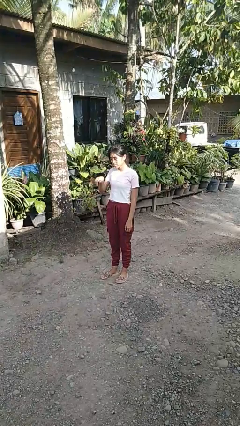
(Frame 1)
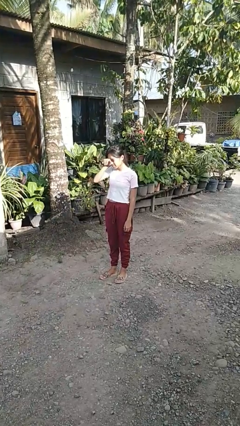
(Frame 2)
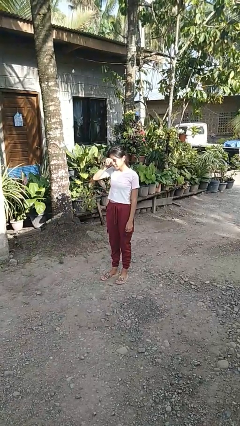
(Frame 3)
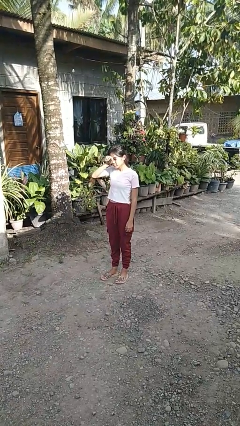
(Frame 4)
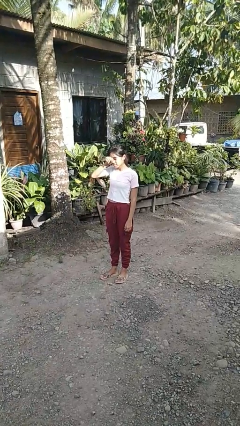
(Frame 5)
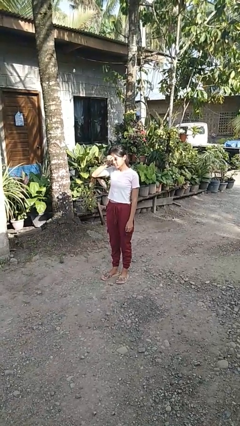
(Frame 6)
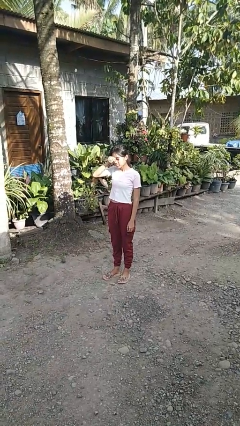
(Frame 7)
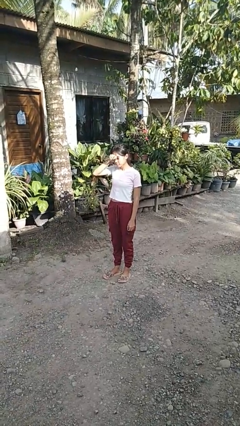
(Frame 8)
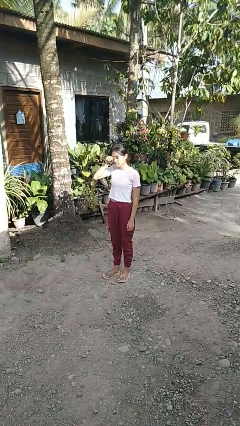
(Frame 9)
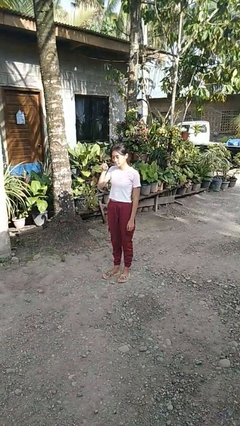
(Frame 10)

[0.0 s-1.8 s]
person rubs eyes

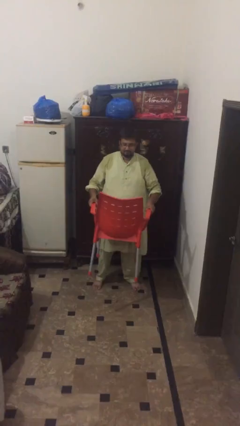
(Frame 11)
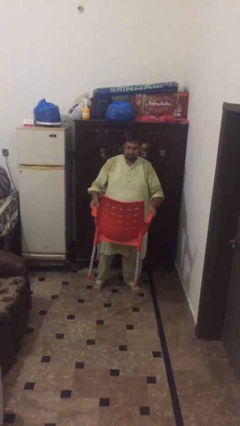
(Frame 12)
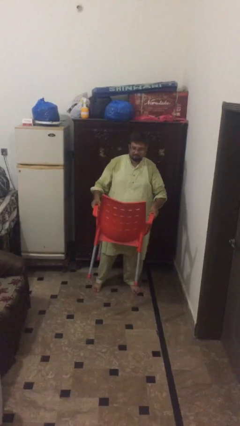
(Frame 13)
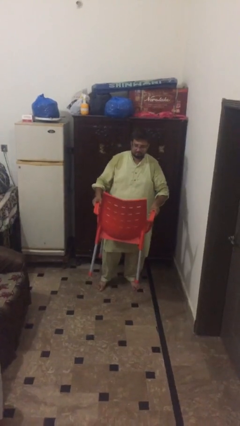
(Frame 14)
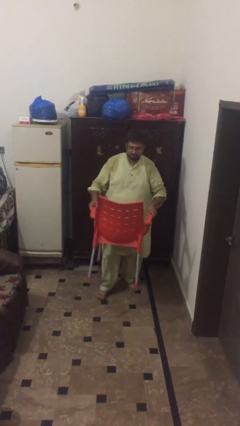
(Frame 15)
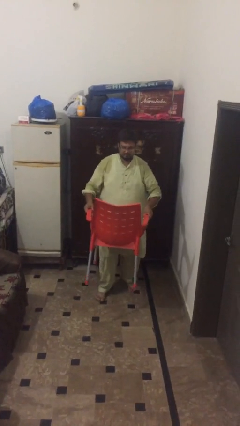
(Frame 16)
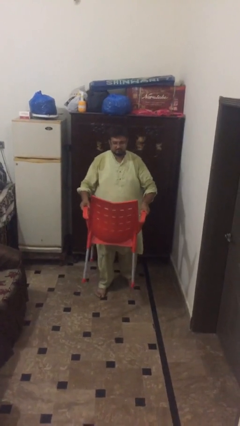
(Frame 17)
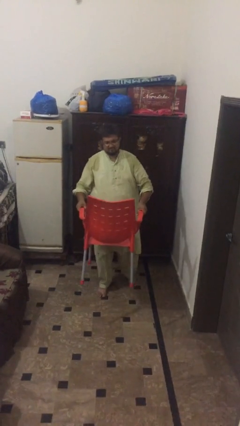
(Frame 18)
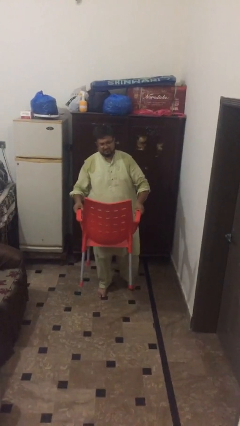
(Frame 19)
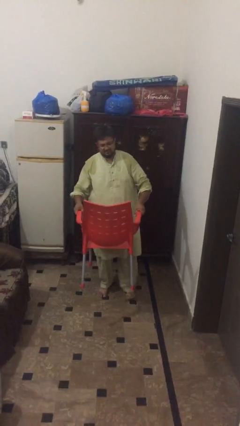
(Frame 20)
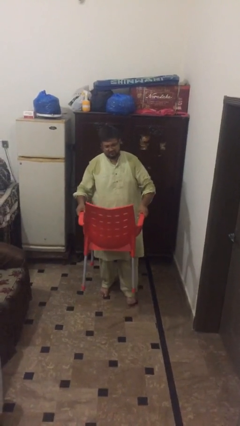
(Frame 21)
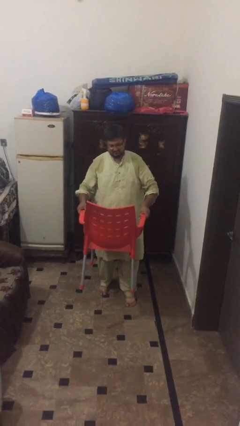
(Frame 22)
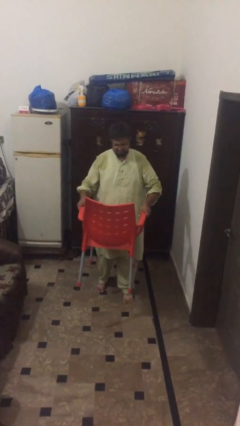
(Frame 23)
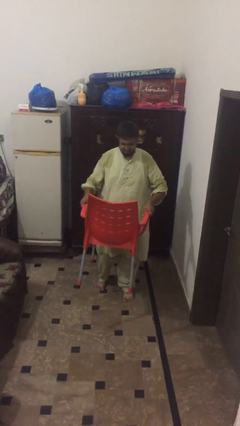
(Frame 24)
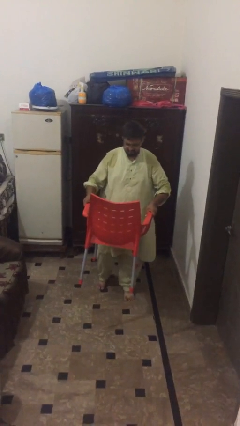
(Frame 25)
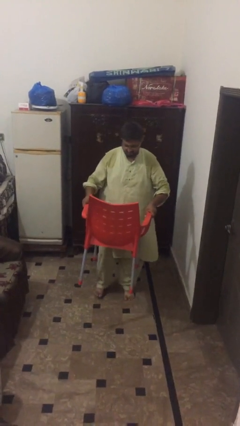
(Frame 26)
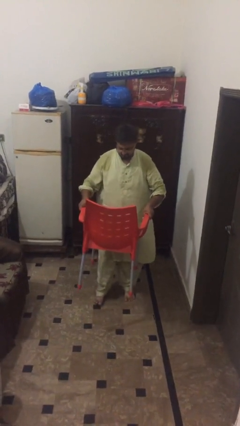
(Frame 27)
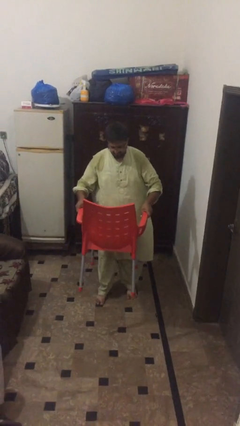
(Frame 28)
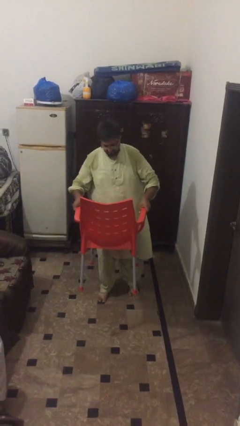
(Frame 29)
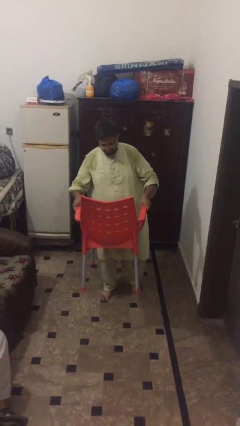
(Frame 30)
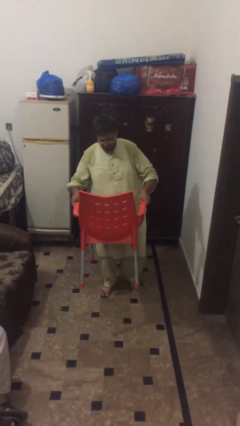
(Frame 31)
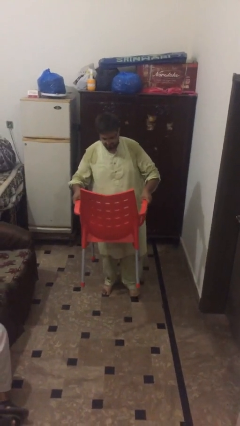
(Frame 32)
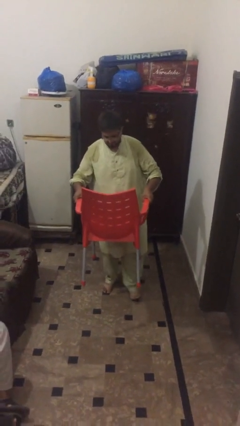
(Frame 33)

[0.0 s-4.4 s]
person carries heavy object

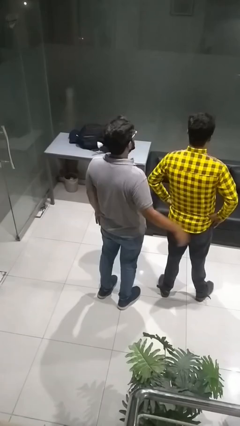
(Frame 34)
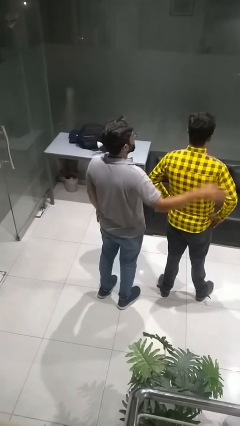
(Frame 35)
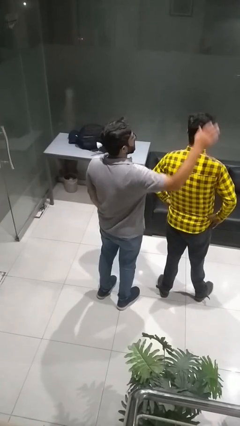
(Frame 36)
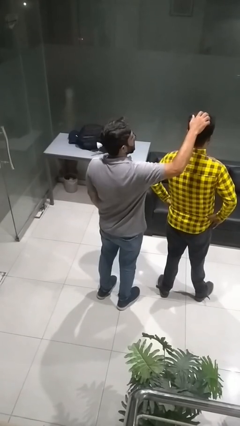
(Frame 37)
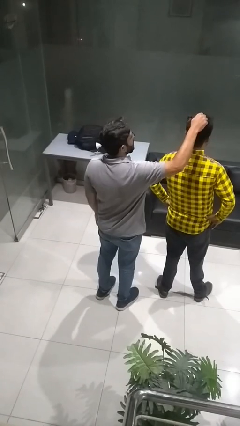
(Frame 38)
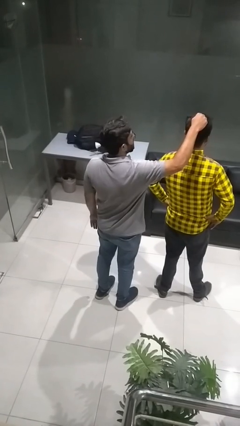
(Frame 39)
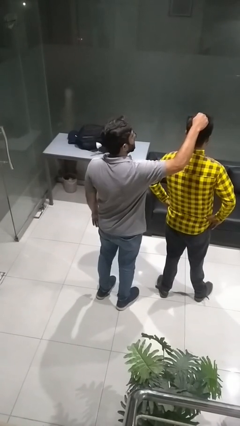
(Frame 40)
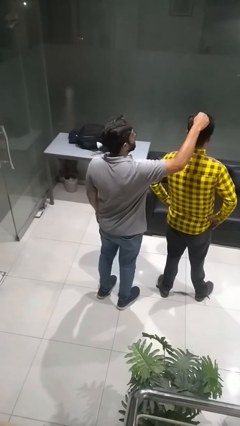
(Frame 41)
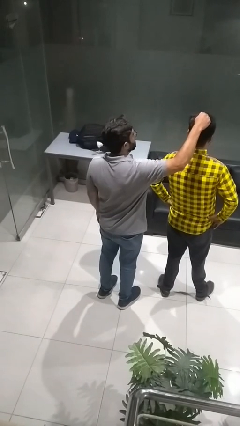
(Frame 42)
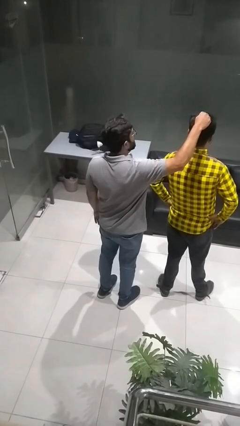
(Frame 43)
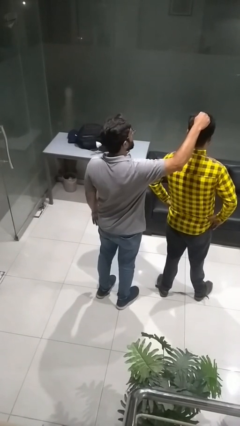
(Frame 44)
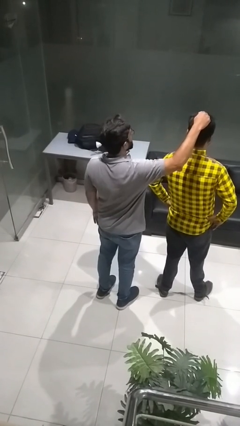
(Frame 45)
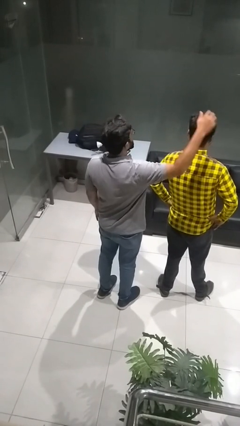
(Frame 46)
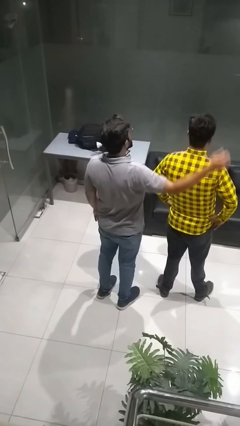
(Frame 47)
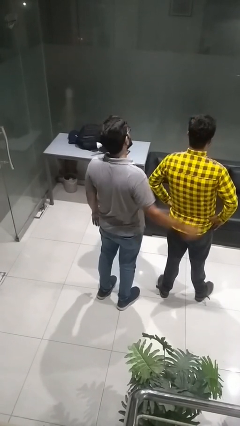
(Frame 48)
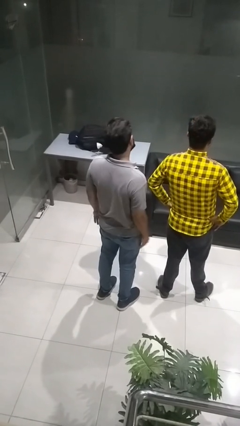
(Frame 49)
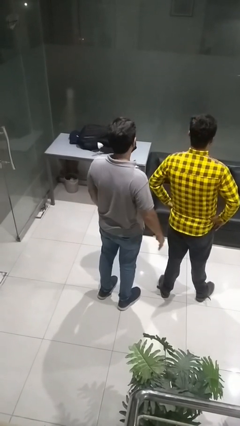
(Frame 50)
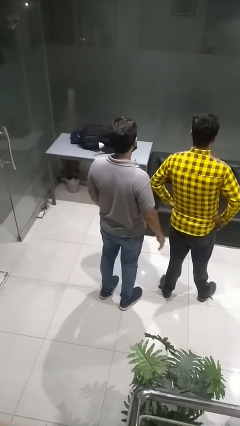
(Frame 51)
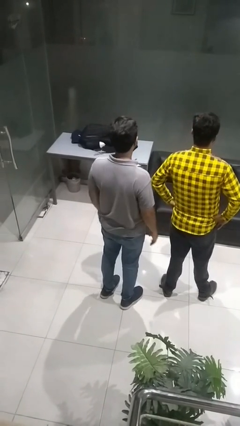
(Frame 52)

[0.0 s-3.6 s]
person grabs person by hair

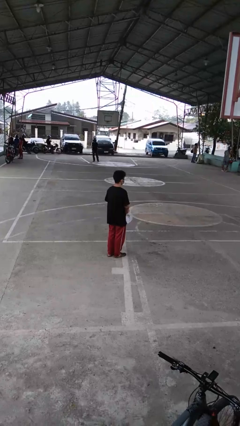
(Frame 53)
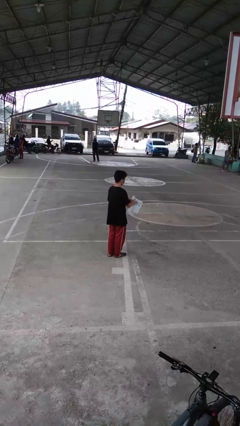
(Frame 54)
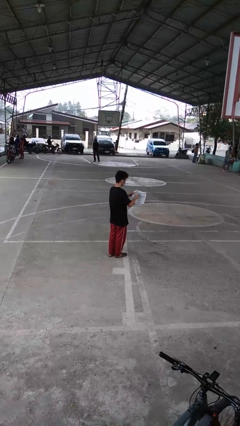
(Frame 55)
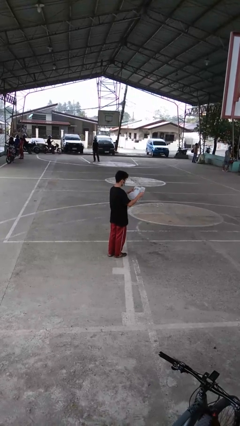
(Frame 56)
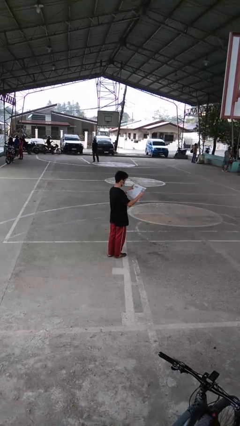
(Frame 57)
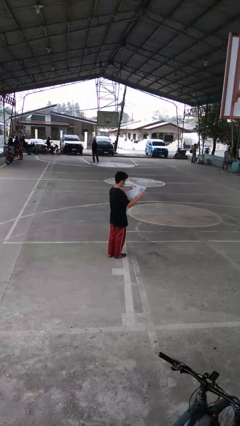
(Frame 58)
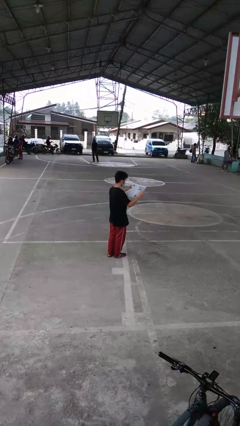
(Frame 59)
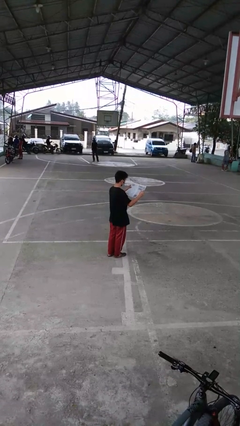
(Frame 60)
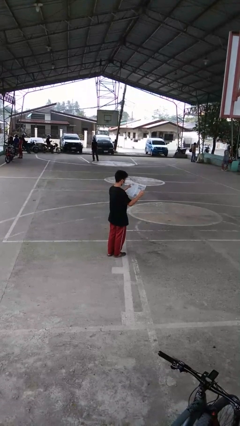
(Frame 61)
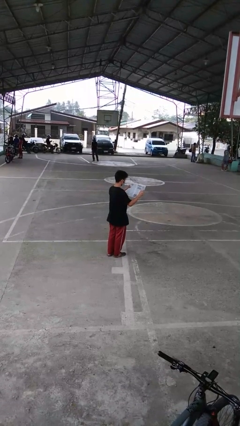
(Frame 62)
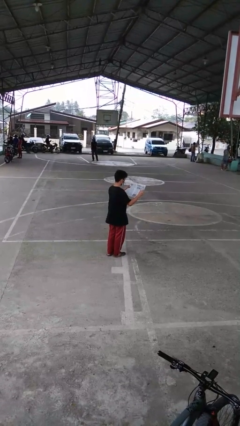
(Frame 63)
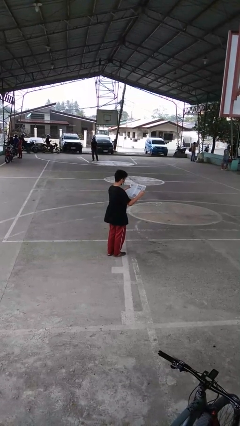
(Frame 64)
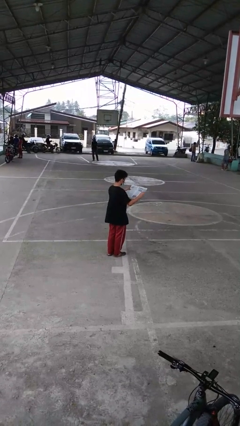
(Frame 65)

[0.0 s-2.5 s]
person reads newspaper

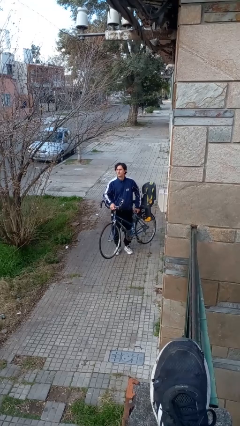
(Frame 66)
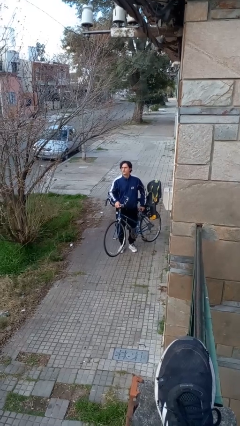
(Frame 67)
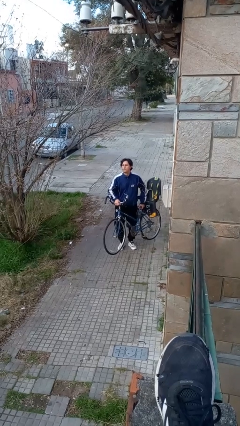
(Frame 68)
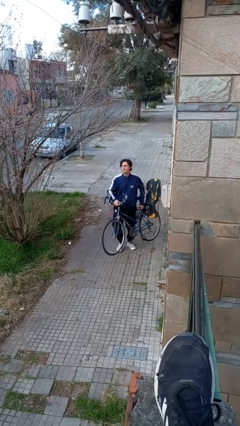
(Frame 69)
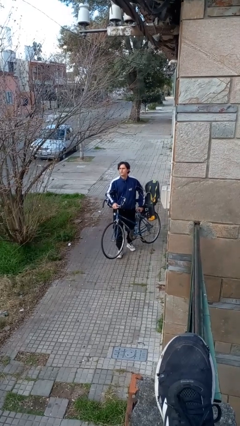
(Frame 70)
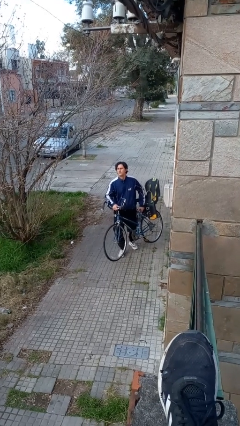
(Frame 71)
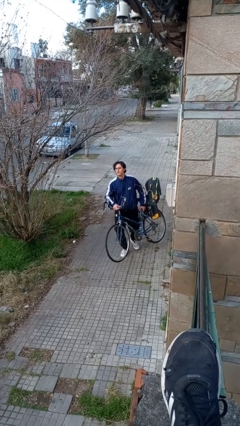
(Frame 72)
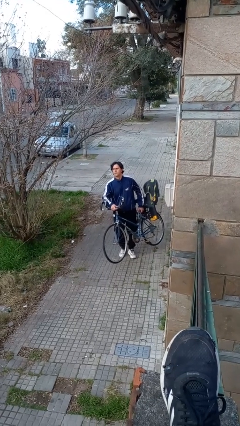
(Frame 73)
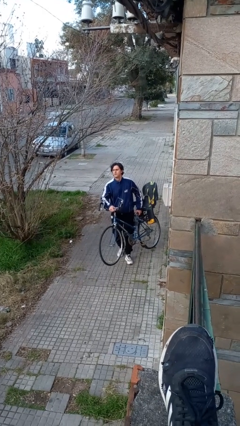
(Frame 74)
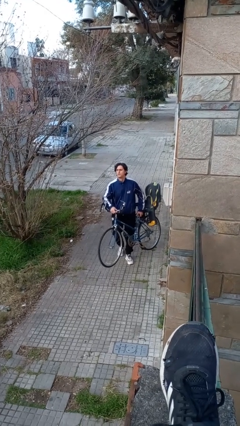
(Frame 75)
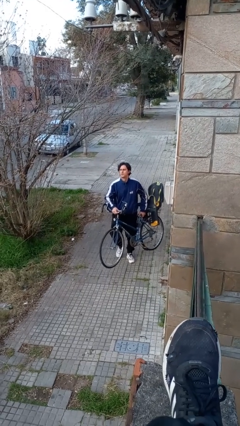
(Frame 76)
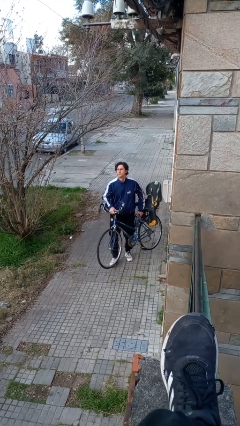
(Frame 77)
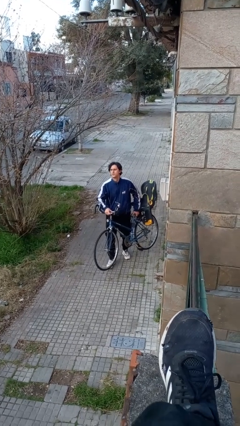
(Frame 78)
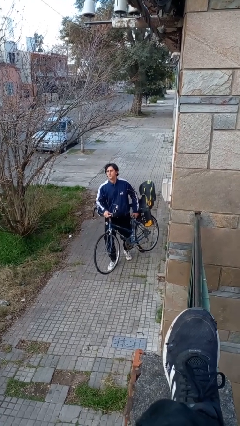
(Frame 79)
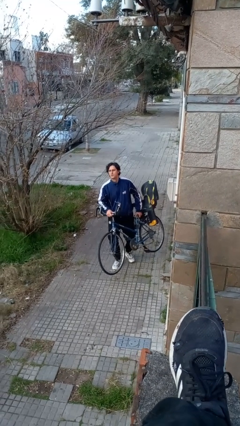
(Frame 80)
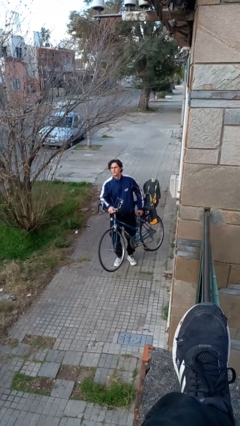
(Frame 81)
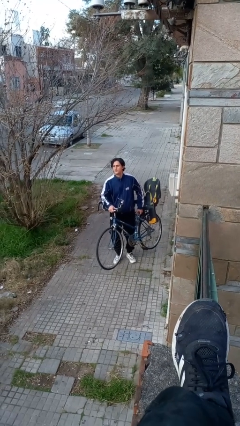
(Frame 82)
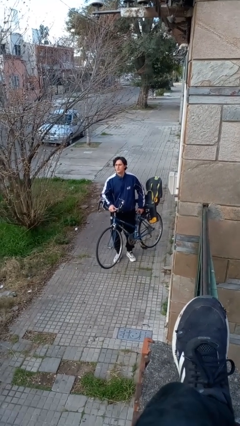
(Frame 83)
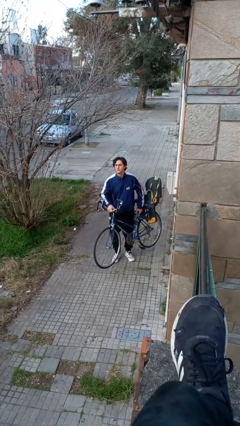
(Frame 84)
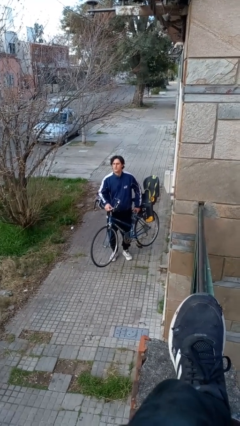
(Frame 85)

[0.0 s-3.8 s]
person carries bicycle

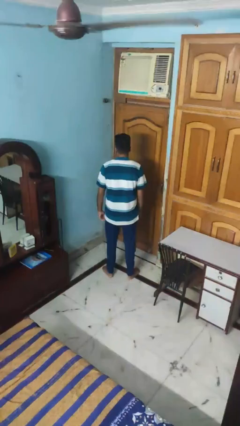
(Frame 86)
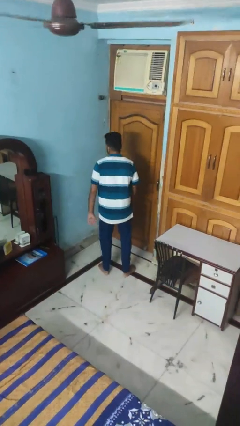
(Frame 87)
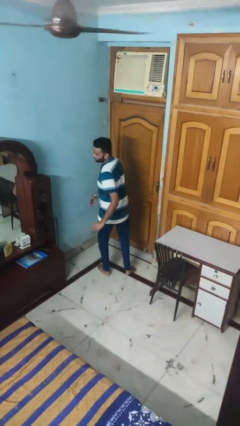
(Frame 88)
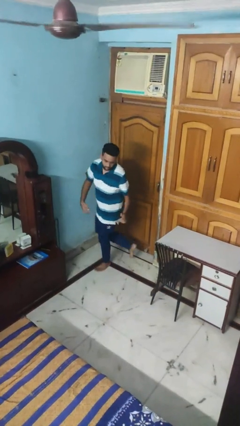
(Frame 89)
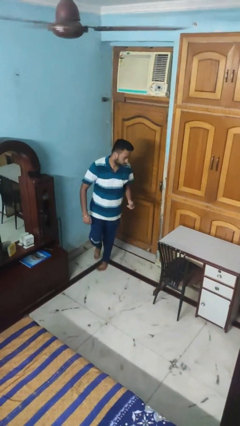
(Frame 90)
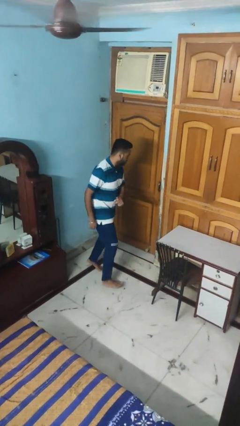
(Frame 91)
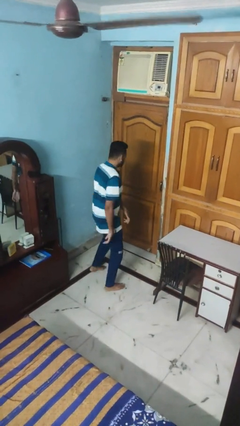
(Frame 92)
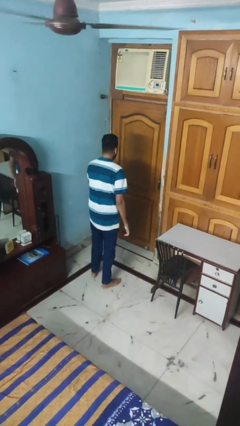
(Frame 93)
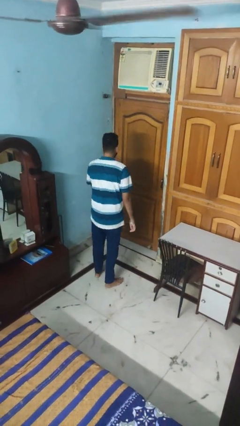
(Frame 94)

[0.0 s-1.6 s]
person twirls
